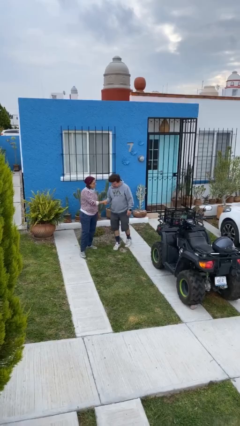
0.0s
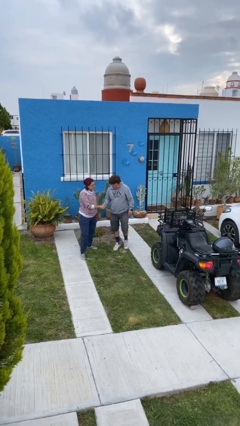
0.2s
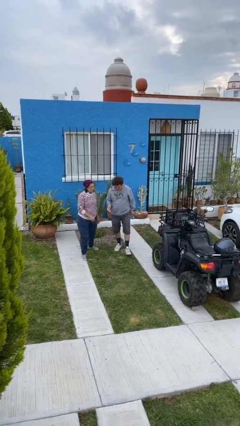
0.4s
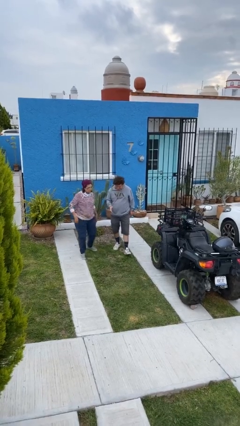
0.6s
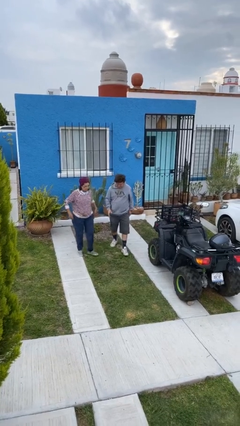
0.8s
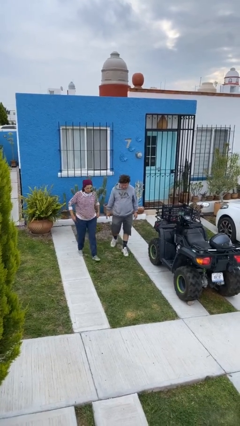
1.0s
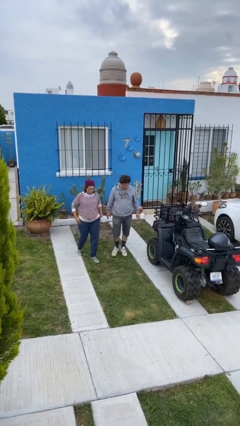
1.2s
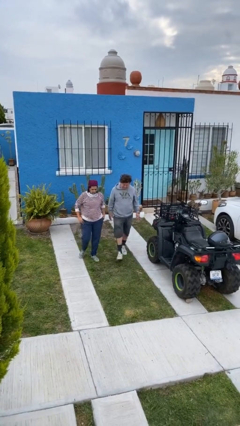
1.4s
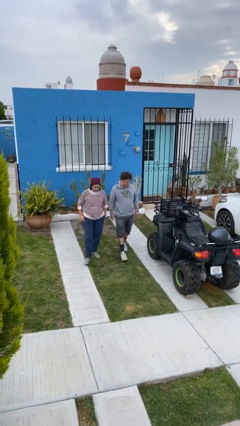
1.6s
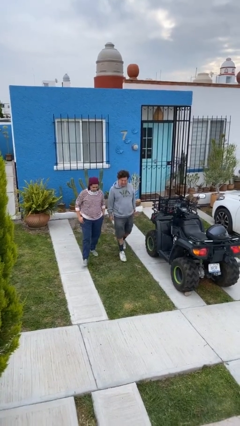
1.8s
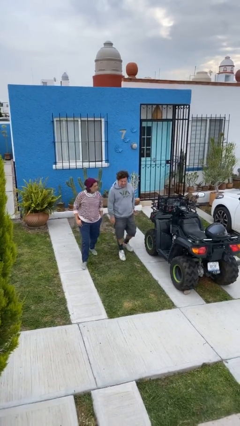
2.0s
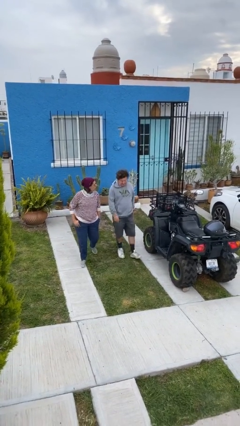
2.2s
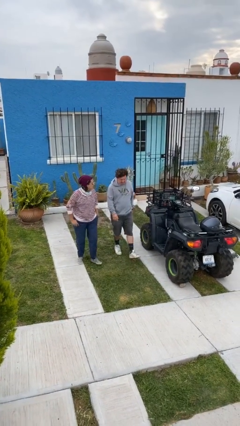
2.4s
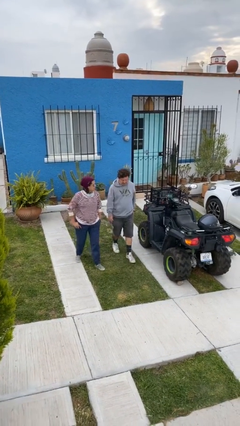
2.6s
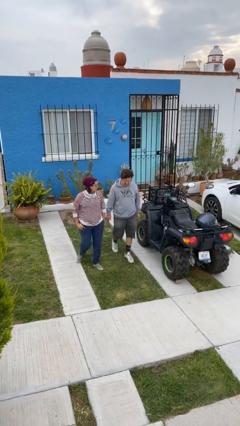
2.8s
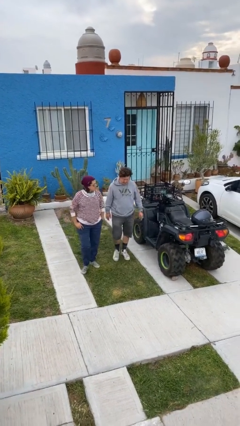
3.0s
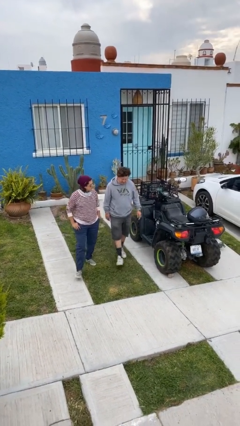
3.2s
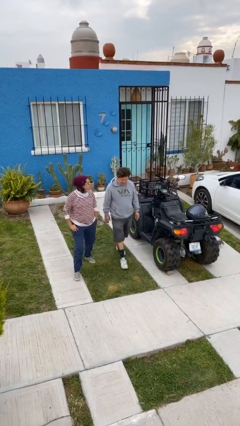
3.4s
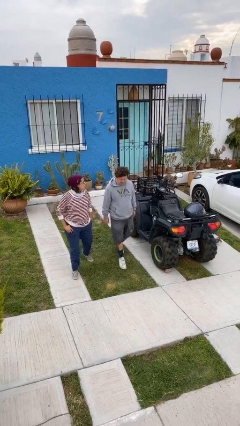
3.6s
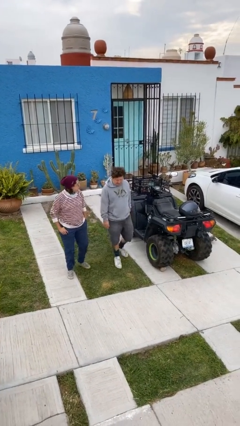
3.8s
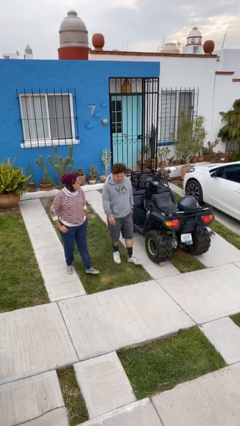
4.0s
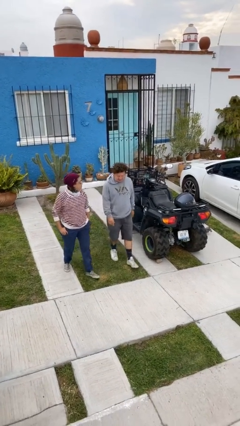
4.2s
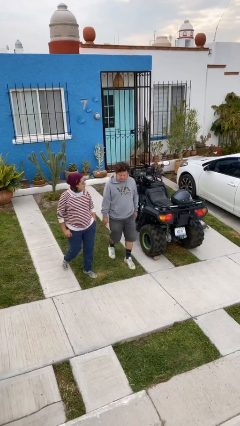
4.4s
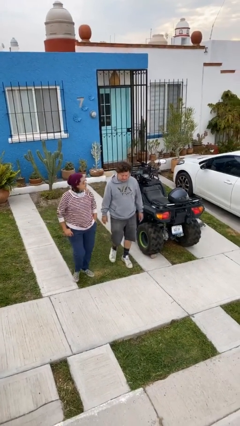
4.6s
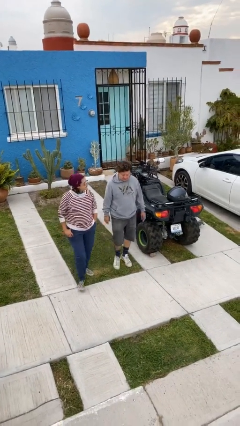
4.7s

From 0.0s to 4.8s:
person talks to person

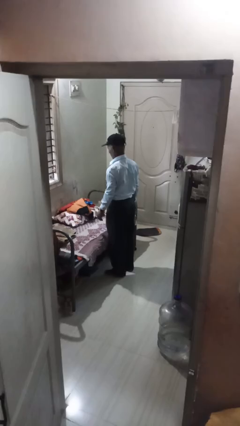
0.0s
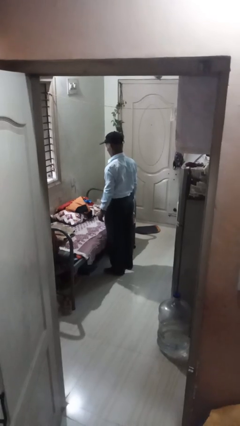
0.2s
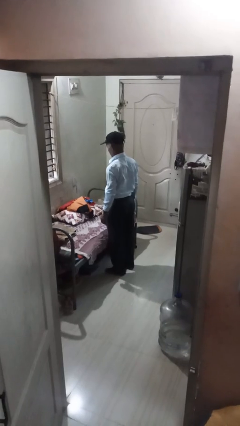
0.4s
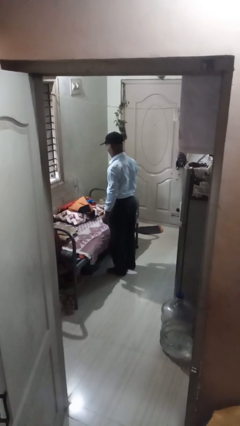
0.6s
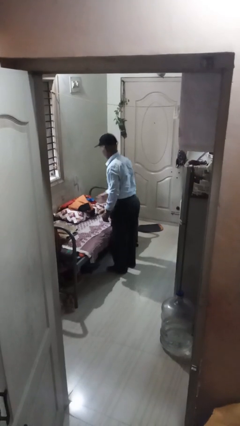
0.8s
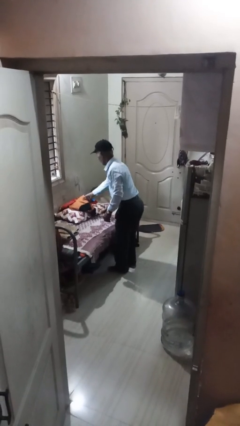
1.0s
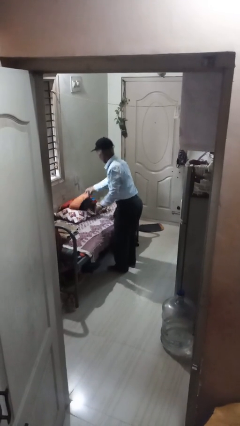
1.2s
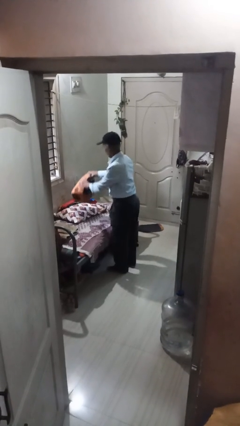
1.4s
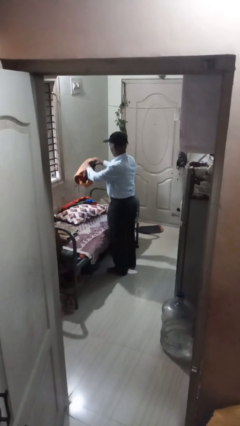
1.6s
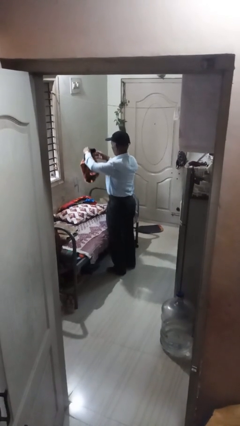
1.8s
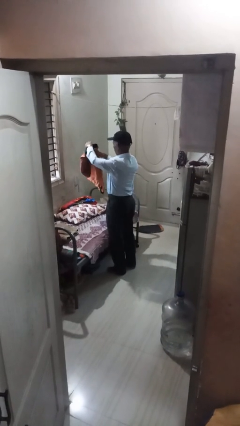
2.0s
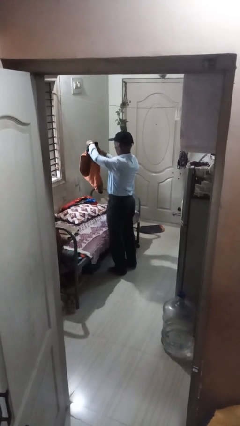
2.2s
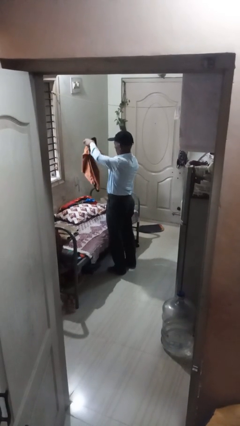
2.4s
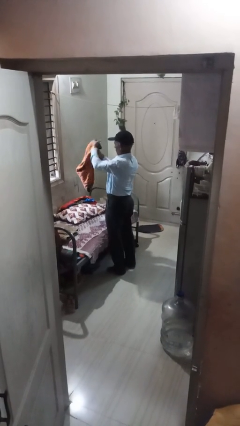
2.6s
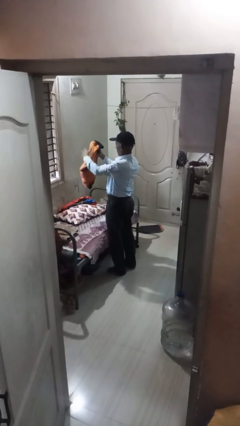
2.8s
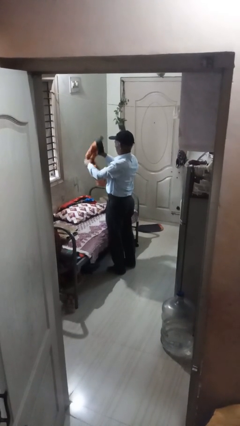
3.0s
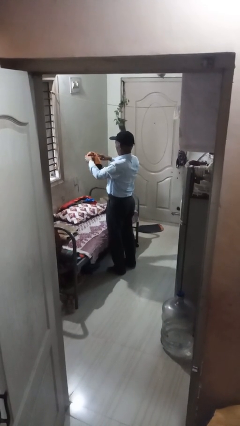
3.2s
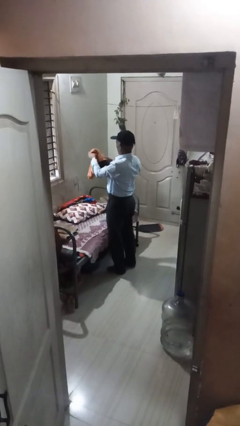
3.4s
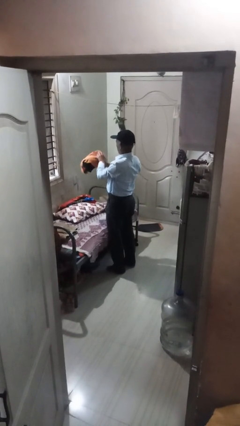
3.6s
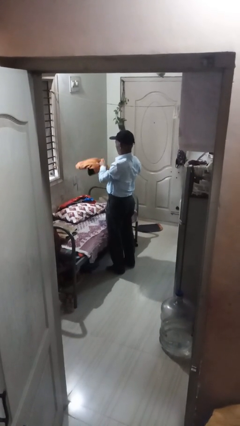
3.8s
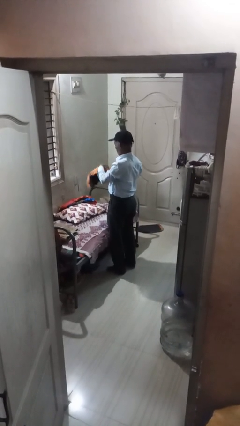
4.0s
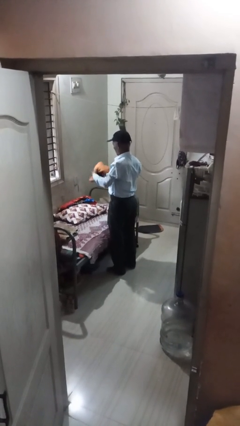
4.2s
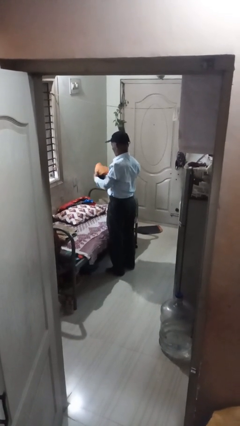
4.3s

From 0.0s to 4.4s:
person folds shirt

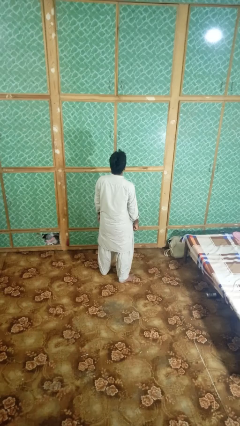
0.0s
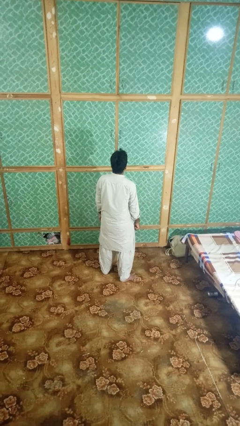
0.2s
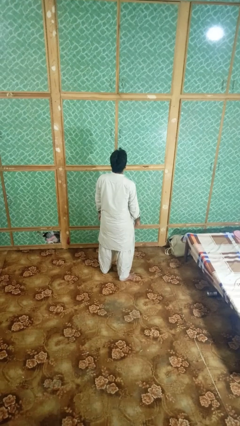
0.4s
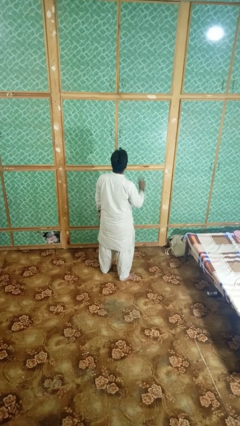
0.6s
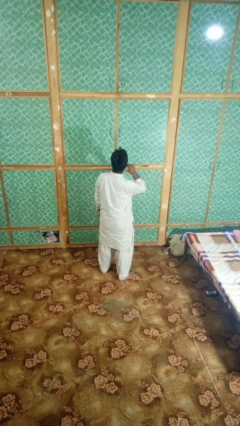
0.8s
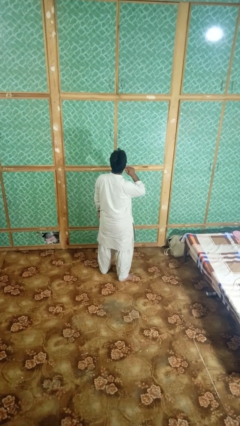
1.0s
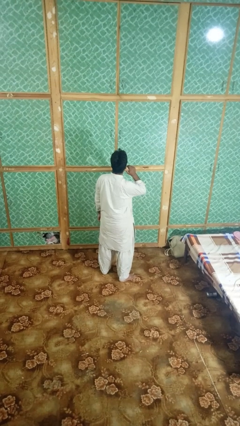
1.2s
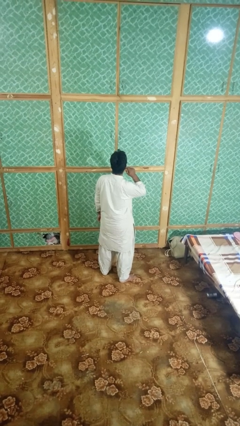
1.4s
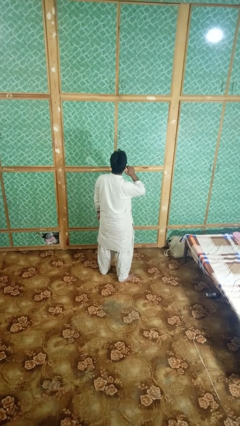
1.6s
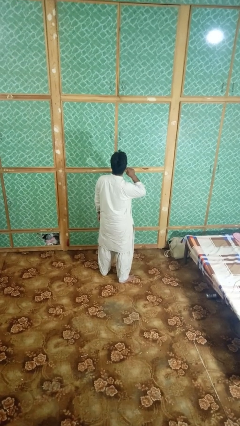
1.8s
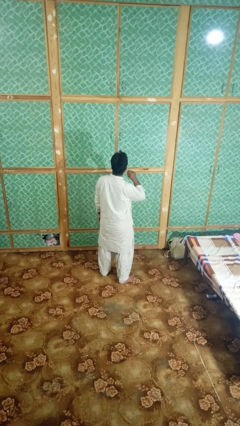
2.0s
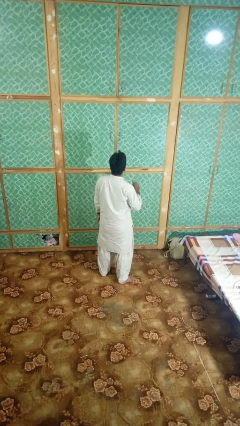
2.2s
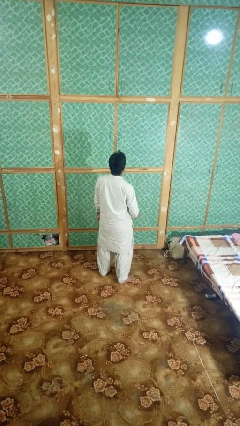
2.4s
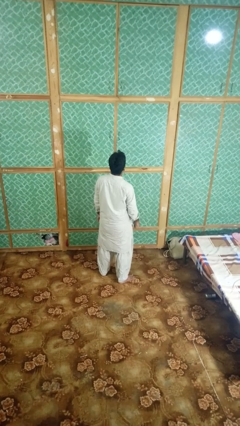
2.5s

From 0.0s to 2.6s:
person touches earlobe

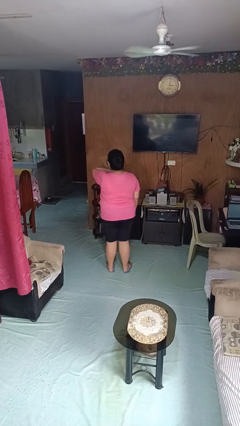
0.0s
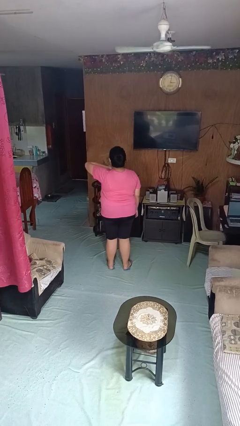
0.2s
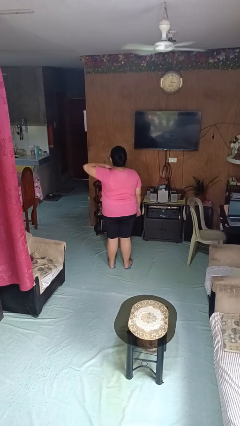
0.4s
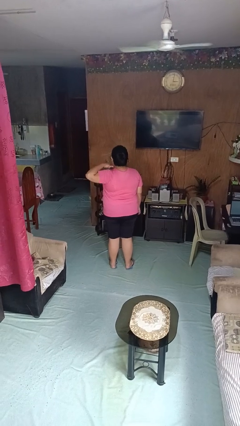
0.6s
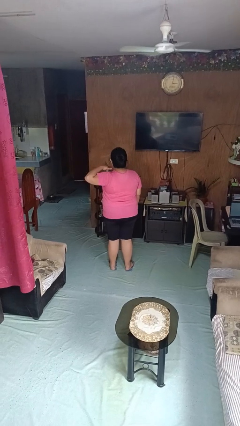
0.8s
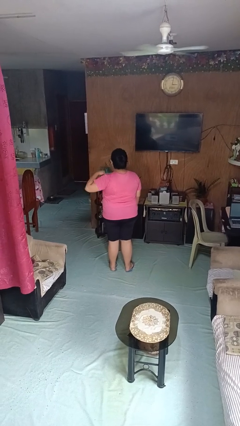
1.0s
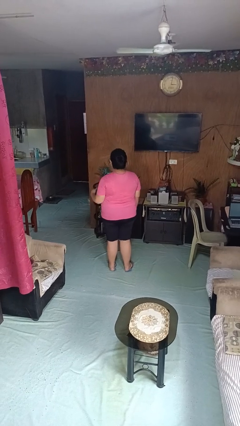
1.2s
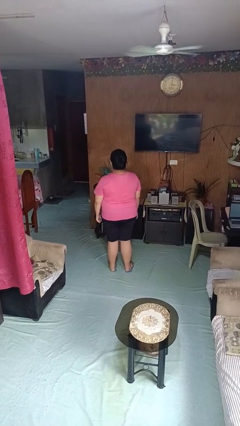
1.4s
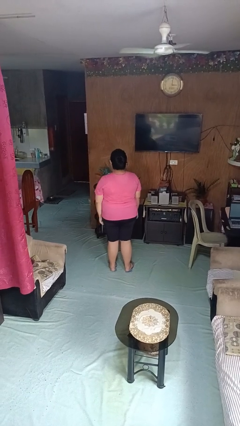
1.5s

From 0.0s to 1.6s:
person gestures cut

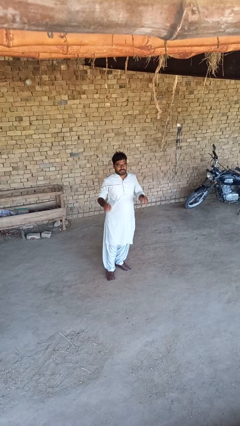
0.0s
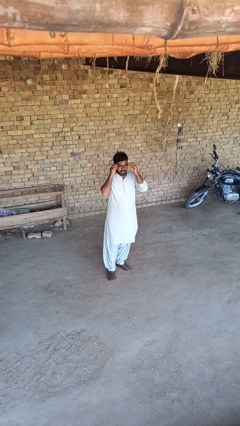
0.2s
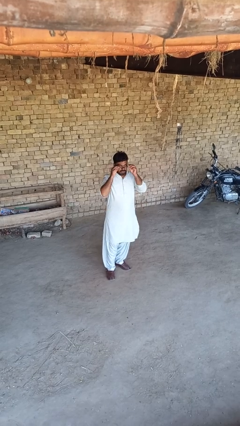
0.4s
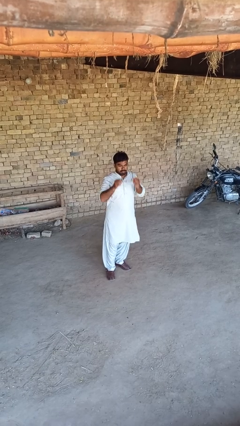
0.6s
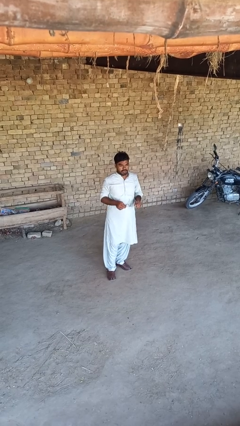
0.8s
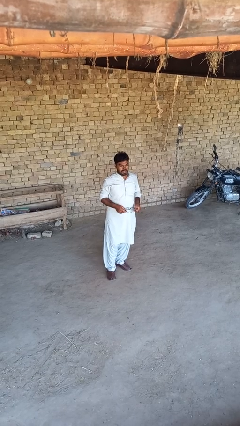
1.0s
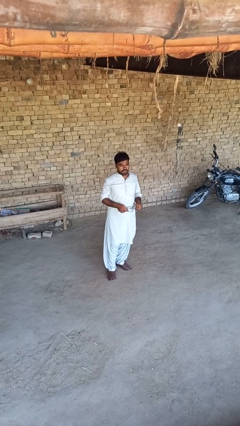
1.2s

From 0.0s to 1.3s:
person takes off glasses

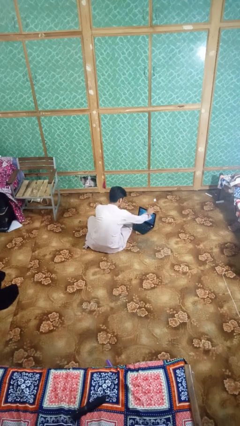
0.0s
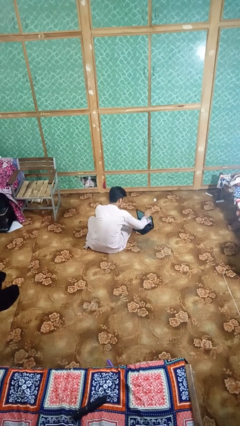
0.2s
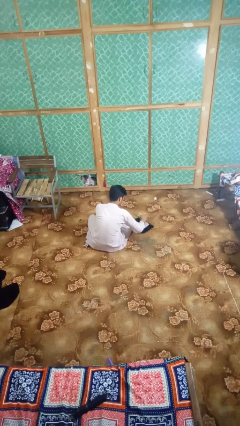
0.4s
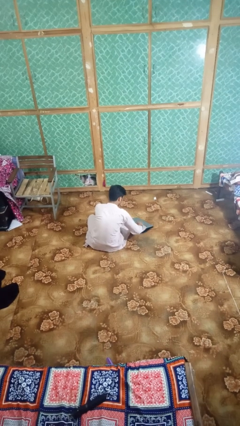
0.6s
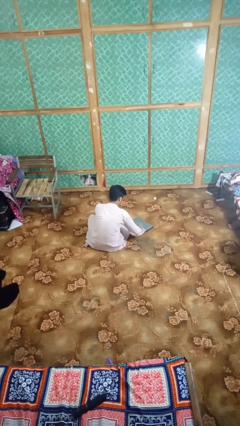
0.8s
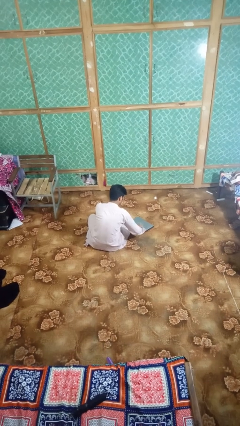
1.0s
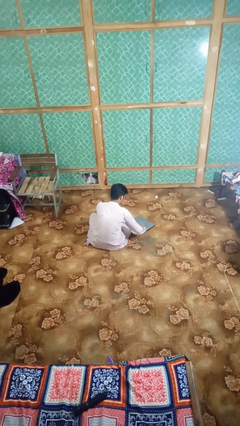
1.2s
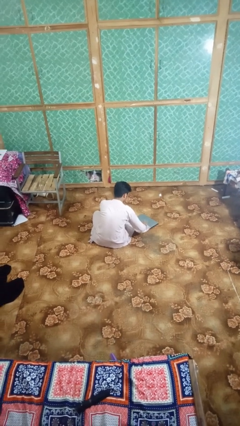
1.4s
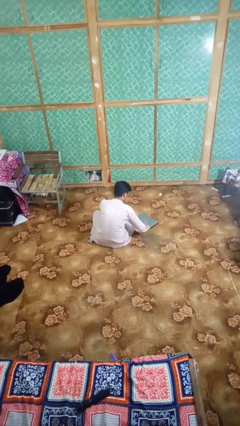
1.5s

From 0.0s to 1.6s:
person closes laptop

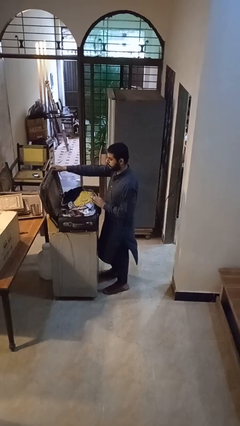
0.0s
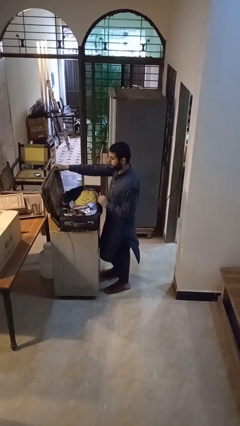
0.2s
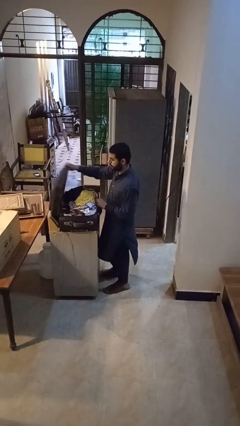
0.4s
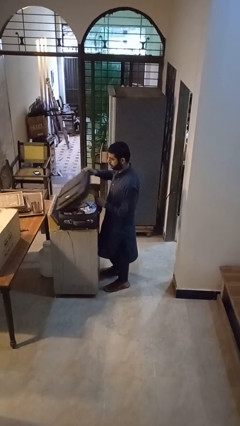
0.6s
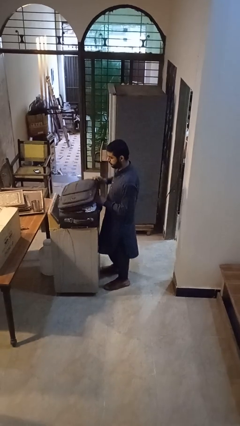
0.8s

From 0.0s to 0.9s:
person closes suitcase
